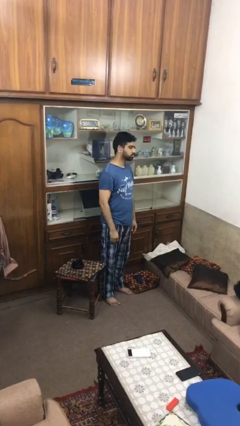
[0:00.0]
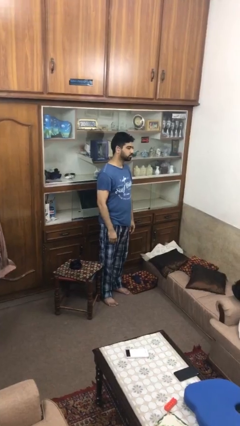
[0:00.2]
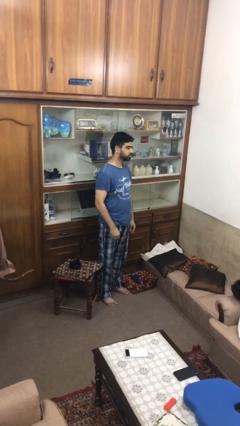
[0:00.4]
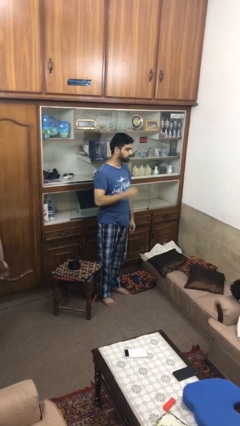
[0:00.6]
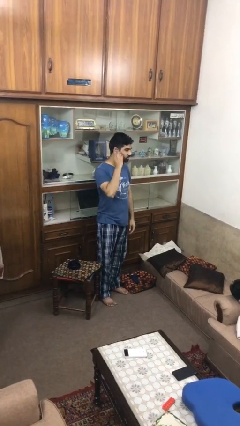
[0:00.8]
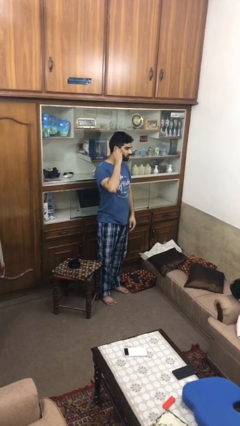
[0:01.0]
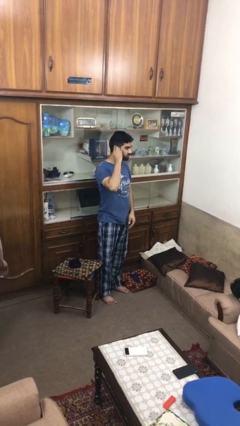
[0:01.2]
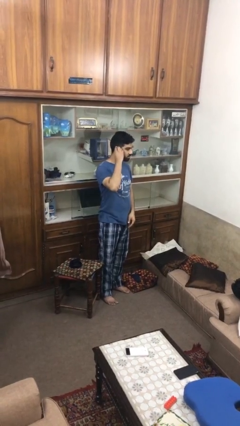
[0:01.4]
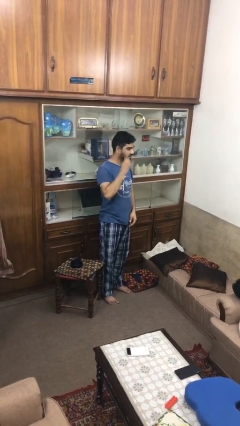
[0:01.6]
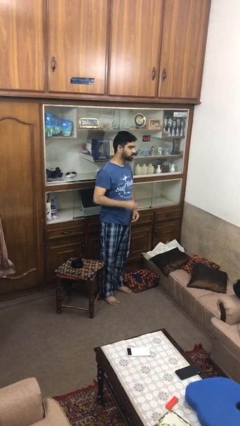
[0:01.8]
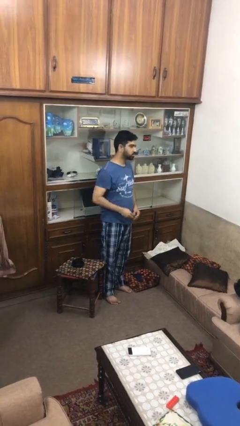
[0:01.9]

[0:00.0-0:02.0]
person takes off earrings

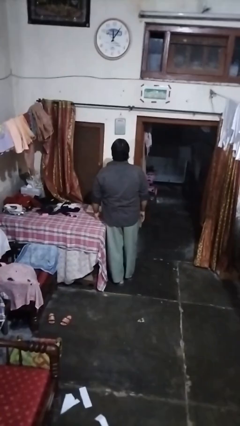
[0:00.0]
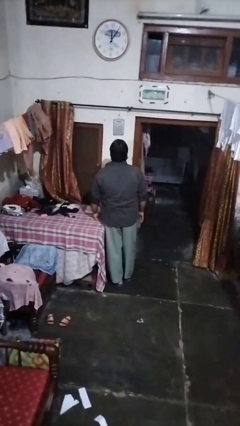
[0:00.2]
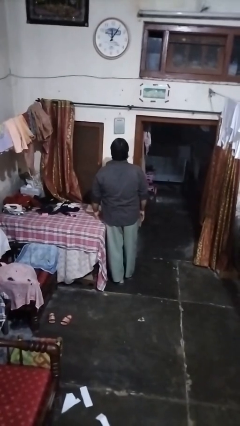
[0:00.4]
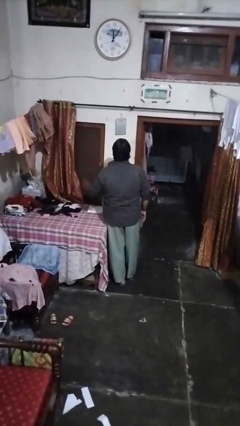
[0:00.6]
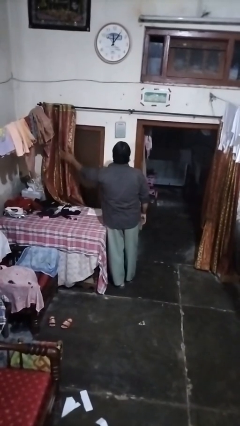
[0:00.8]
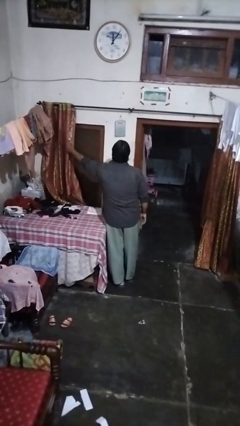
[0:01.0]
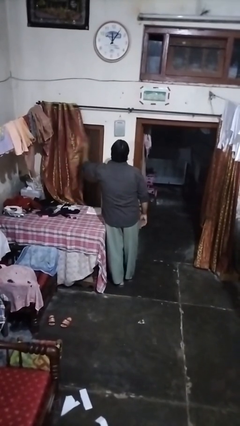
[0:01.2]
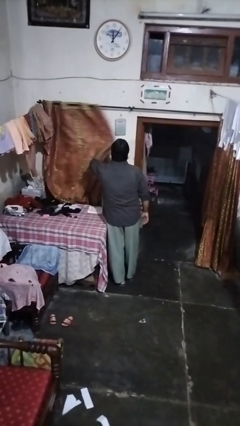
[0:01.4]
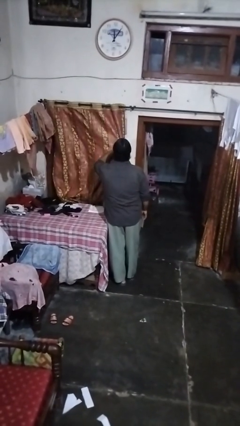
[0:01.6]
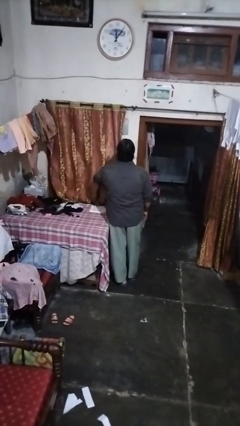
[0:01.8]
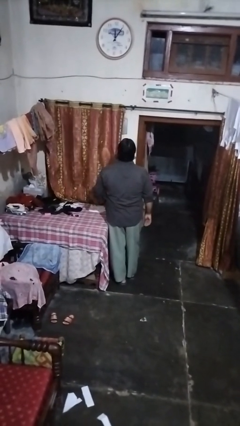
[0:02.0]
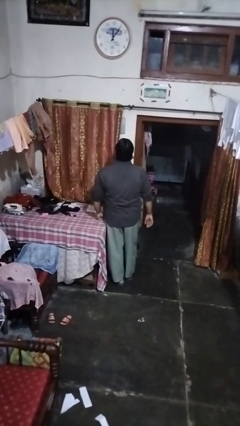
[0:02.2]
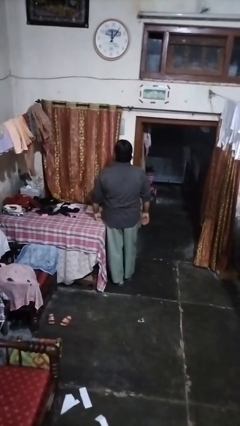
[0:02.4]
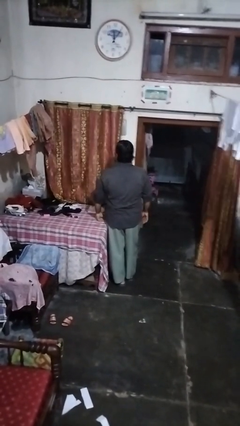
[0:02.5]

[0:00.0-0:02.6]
person closes curtains

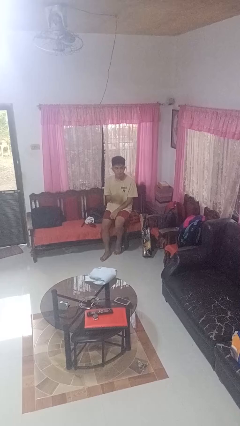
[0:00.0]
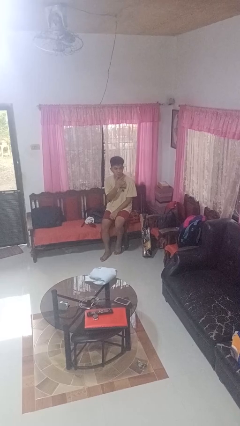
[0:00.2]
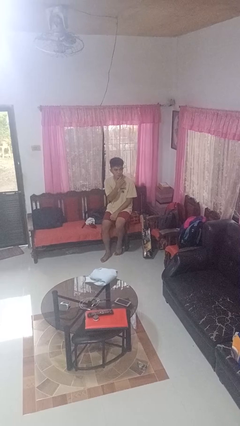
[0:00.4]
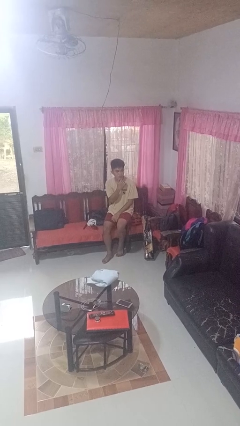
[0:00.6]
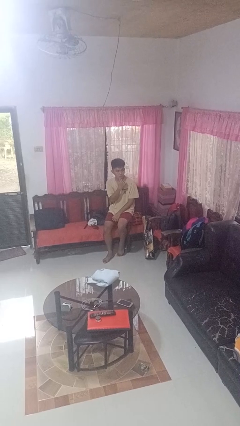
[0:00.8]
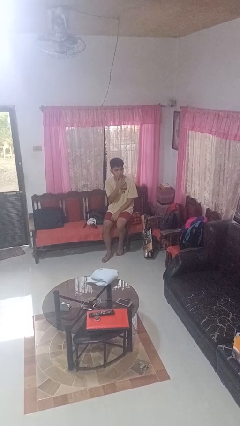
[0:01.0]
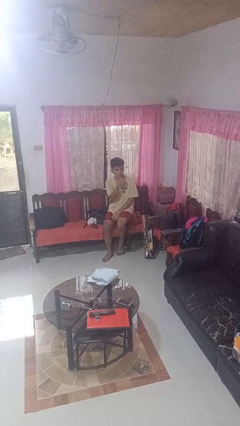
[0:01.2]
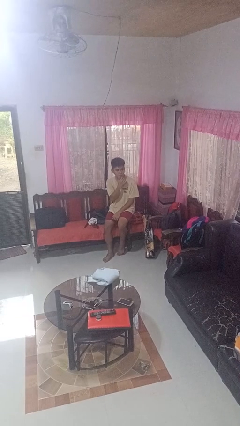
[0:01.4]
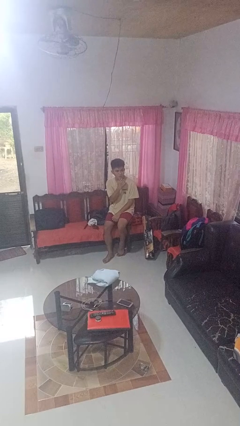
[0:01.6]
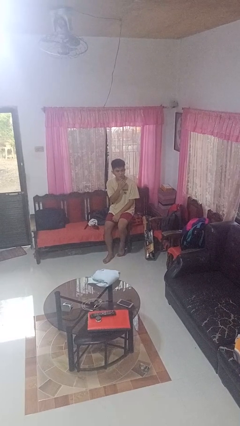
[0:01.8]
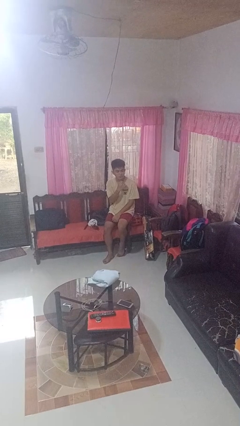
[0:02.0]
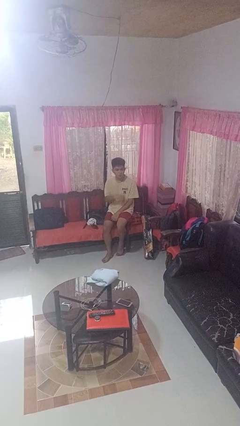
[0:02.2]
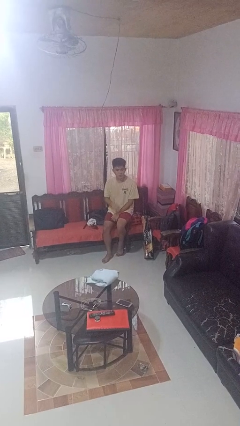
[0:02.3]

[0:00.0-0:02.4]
person strokes chin

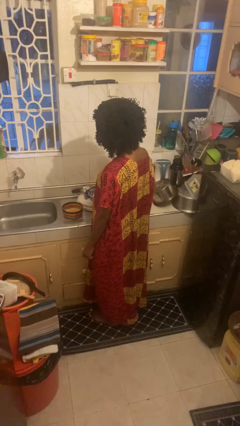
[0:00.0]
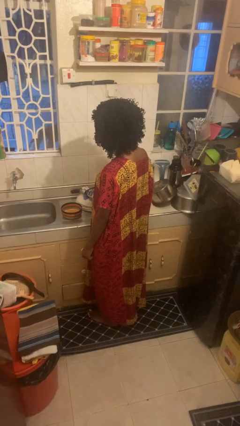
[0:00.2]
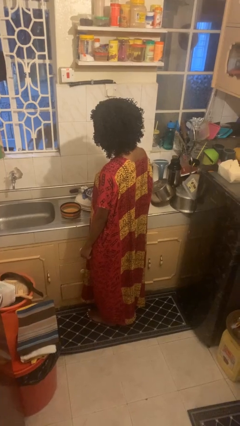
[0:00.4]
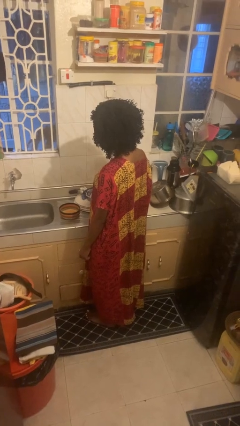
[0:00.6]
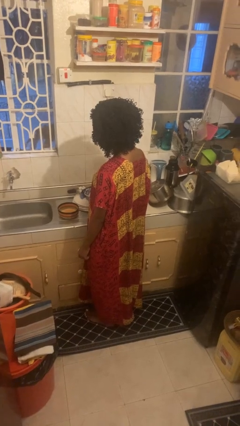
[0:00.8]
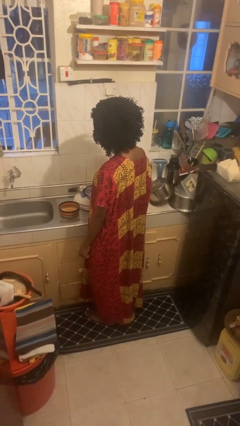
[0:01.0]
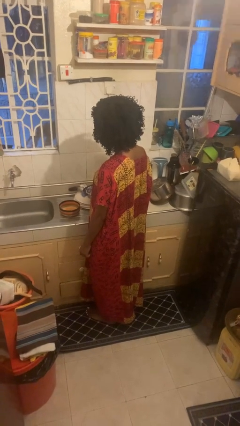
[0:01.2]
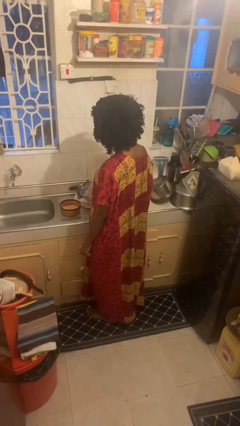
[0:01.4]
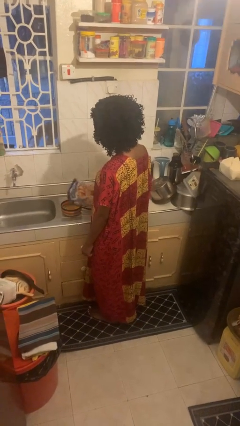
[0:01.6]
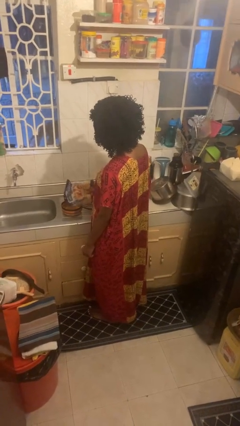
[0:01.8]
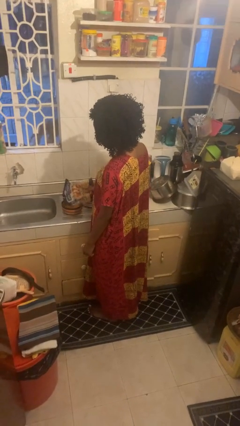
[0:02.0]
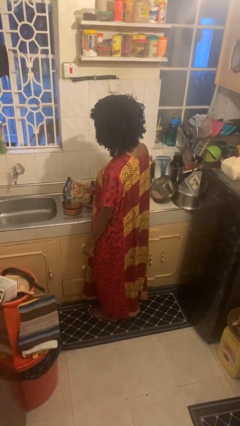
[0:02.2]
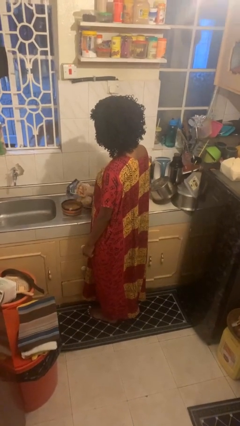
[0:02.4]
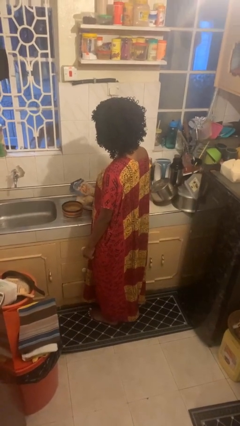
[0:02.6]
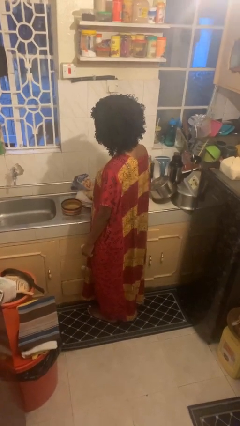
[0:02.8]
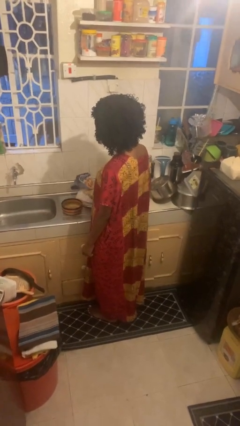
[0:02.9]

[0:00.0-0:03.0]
person pours into bowl

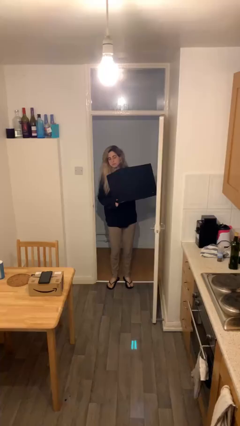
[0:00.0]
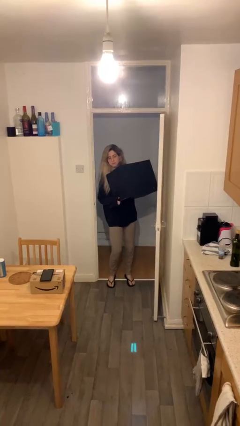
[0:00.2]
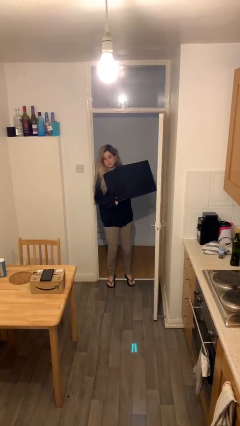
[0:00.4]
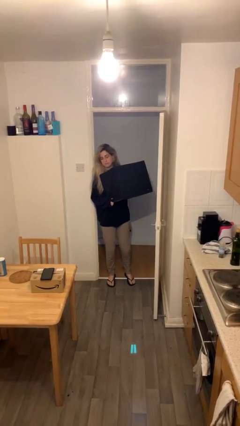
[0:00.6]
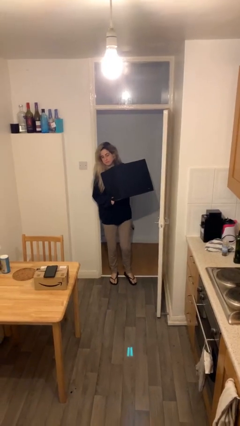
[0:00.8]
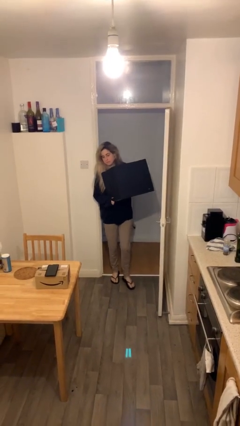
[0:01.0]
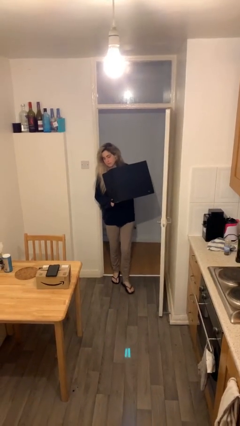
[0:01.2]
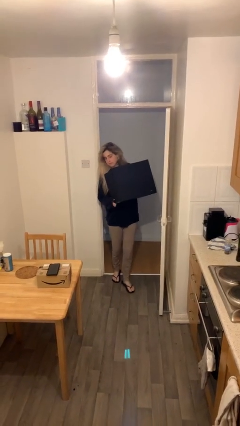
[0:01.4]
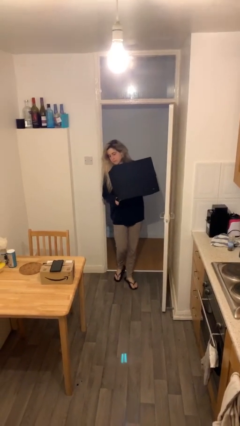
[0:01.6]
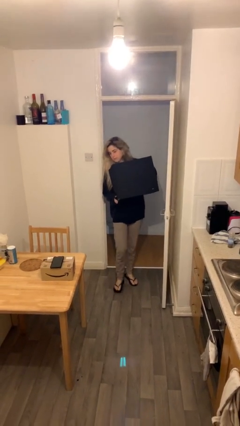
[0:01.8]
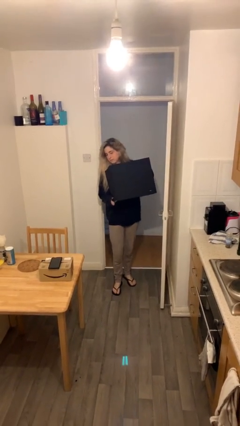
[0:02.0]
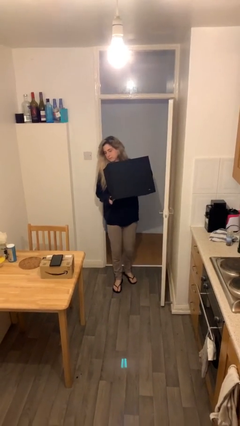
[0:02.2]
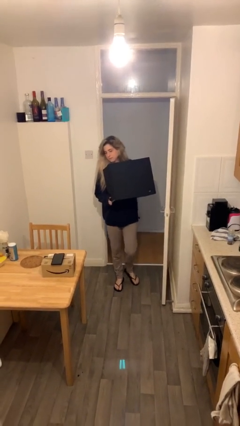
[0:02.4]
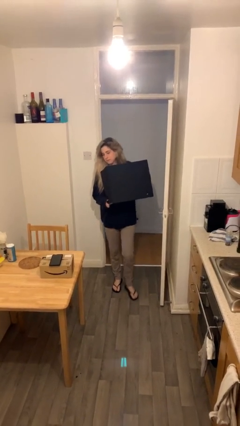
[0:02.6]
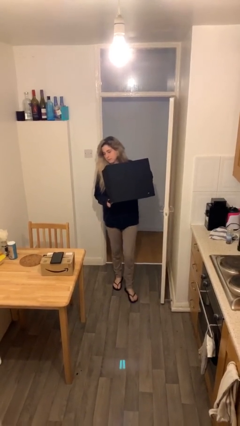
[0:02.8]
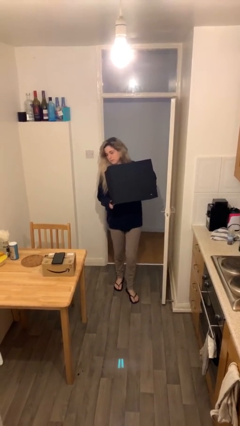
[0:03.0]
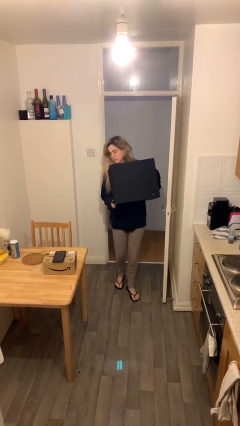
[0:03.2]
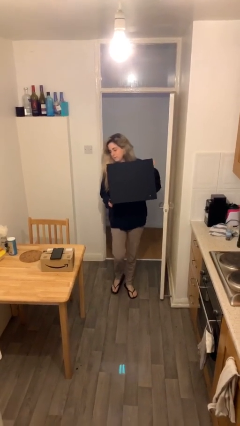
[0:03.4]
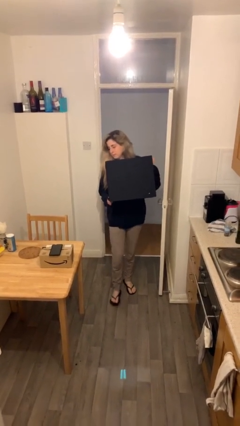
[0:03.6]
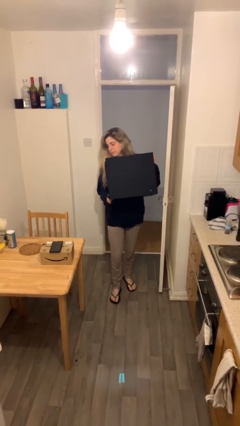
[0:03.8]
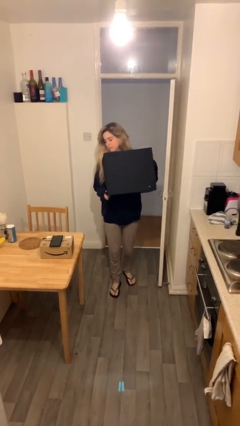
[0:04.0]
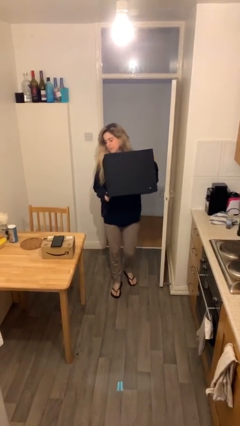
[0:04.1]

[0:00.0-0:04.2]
person carries heavy object

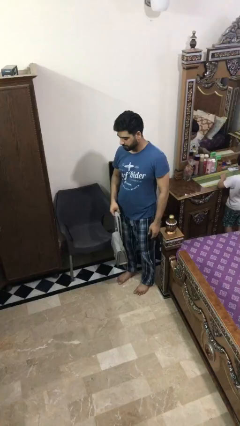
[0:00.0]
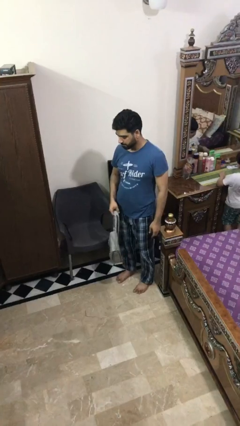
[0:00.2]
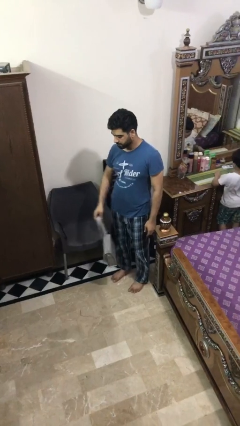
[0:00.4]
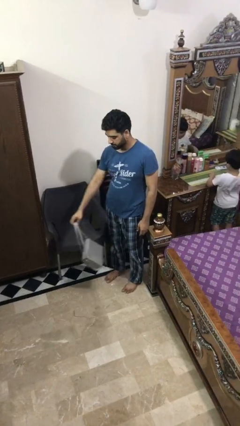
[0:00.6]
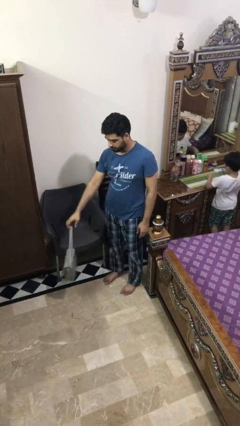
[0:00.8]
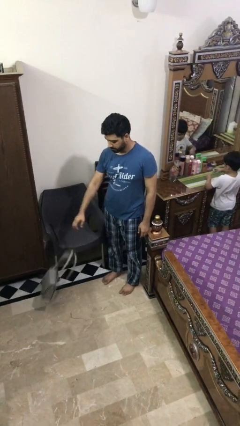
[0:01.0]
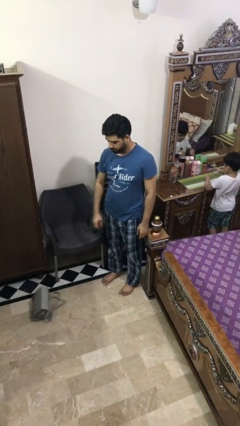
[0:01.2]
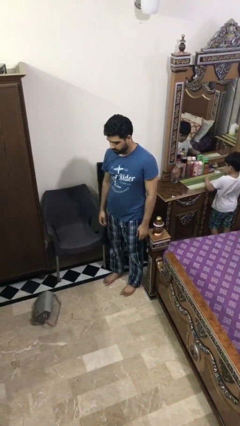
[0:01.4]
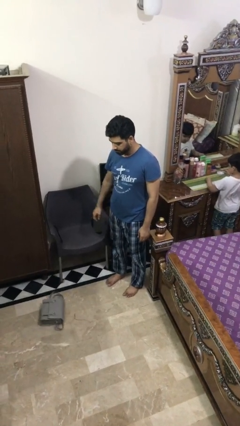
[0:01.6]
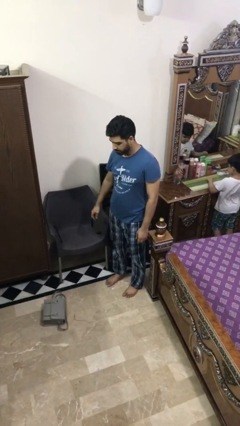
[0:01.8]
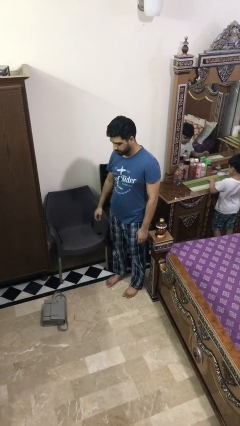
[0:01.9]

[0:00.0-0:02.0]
person throws object to ground

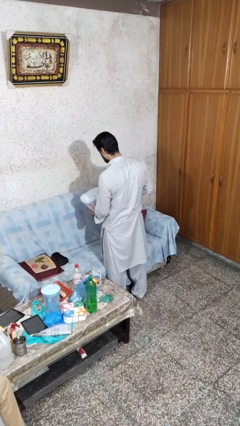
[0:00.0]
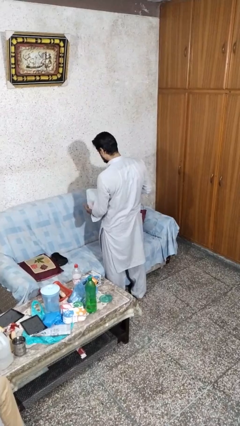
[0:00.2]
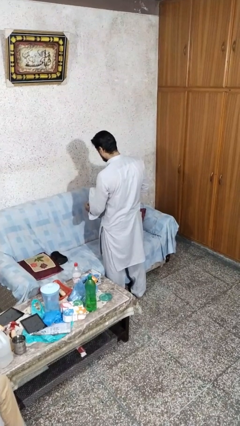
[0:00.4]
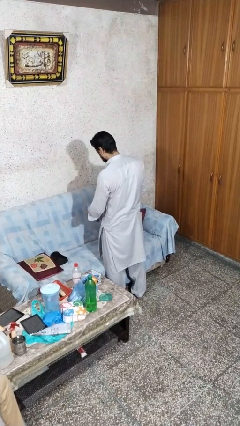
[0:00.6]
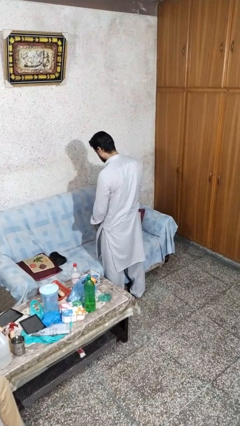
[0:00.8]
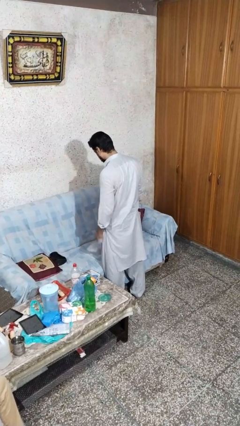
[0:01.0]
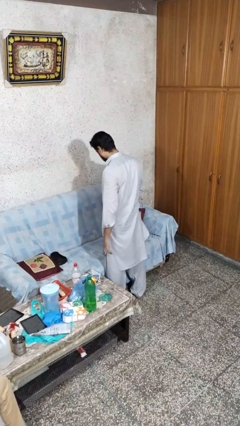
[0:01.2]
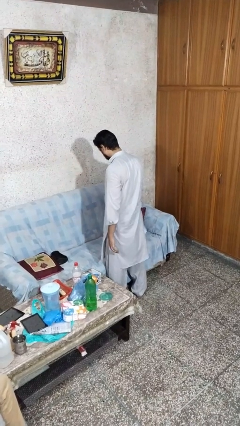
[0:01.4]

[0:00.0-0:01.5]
person puts down object on couch
